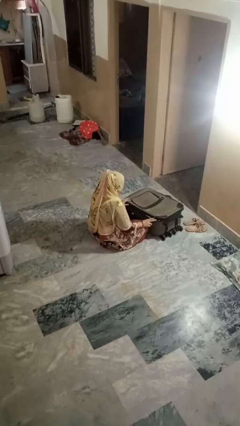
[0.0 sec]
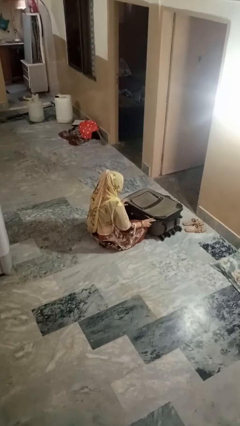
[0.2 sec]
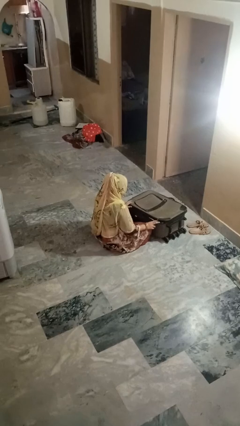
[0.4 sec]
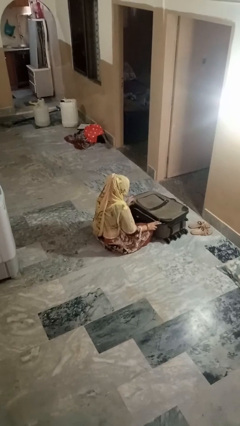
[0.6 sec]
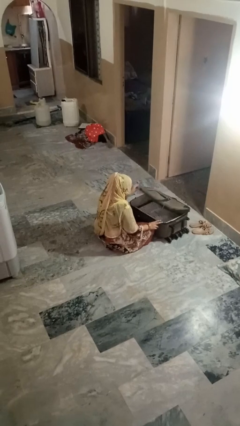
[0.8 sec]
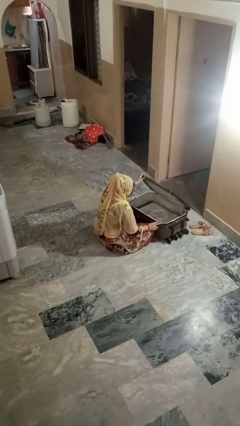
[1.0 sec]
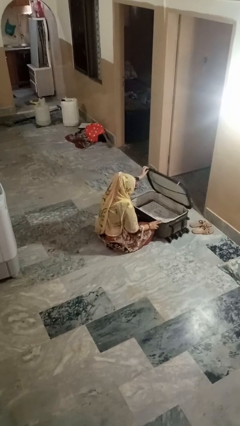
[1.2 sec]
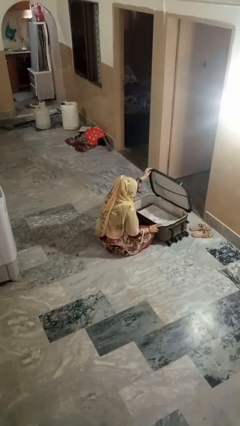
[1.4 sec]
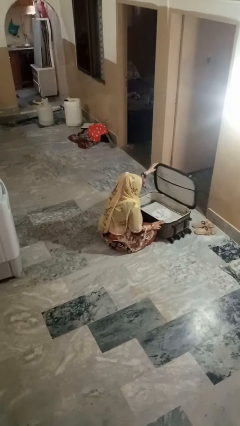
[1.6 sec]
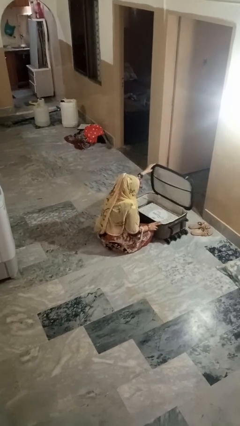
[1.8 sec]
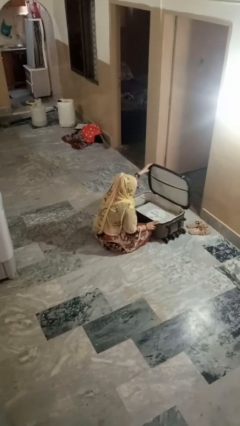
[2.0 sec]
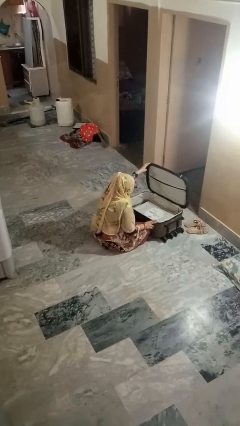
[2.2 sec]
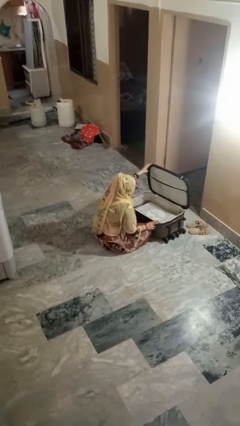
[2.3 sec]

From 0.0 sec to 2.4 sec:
person opens suitcase

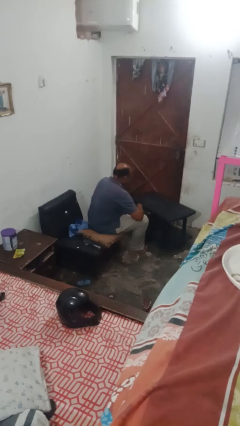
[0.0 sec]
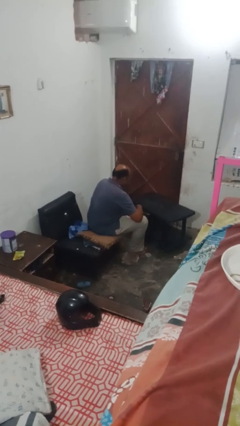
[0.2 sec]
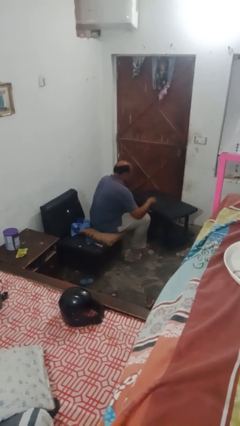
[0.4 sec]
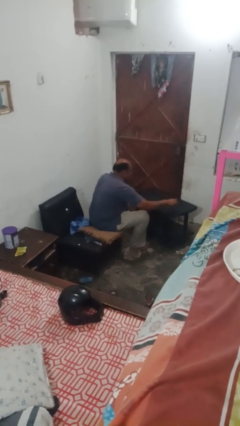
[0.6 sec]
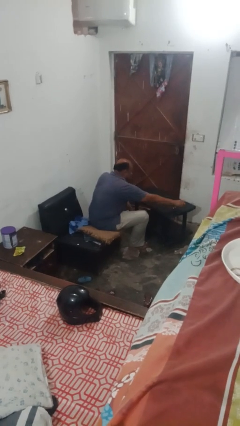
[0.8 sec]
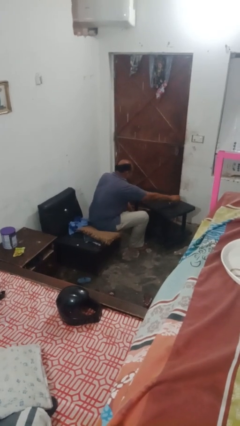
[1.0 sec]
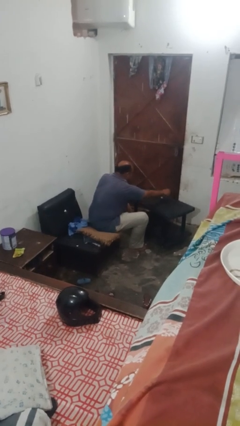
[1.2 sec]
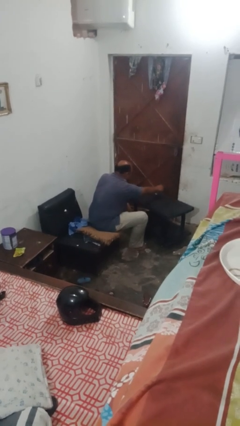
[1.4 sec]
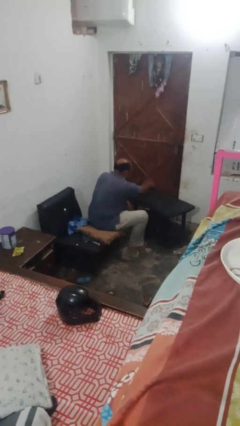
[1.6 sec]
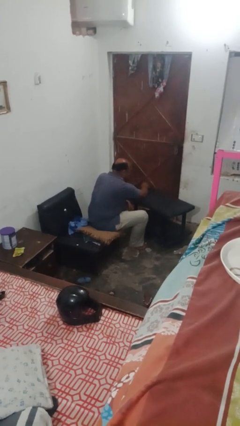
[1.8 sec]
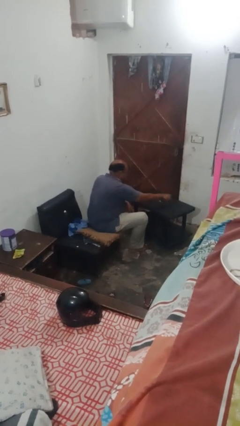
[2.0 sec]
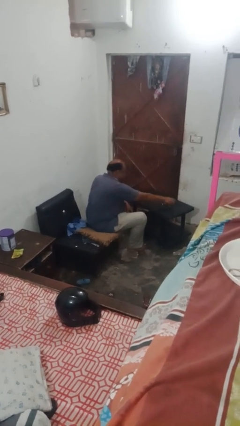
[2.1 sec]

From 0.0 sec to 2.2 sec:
person sprays from bottle

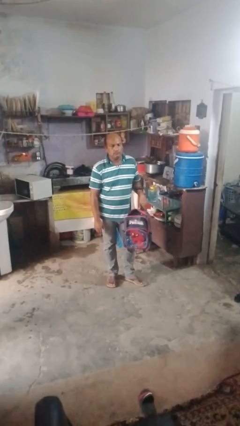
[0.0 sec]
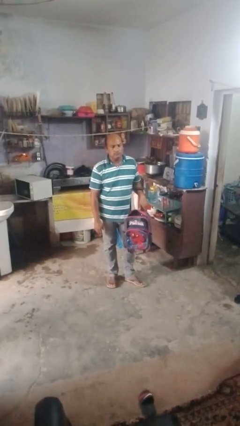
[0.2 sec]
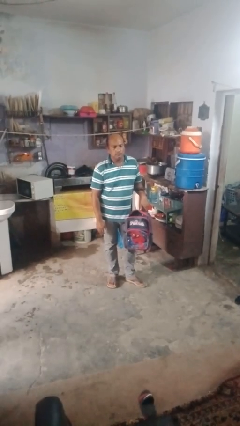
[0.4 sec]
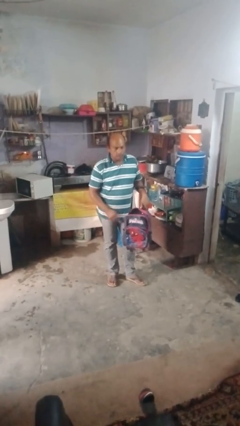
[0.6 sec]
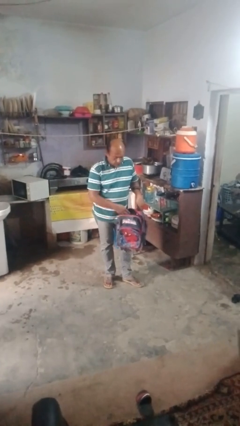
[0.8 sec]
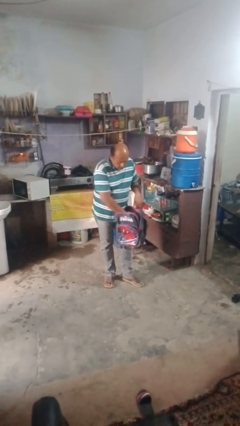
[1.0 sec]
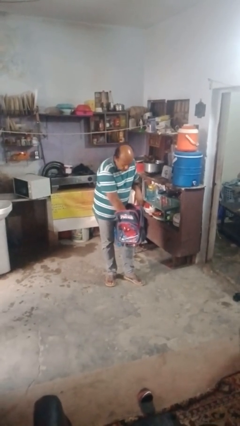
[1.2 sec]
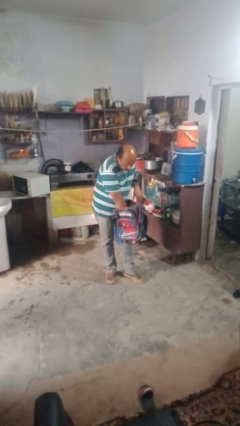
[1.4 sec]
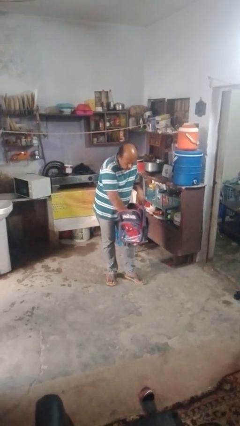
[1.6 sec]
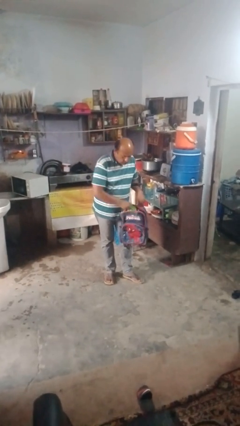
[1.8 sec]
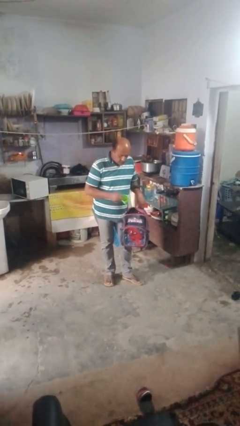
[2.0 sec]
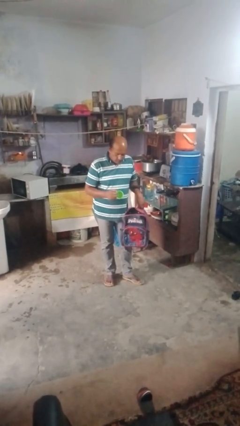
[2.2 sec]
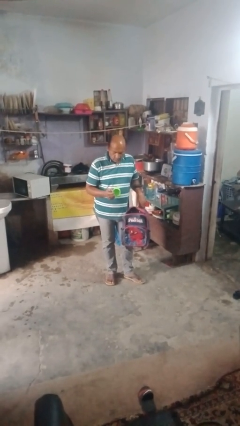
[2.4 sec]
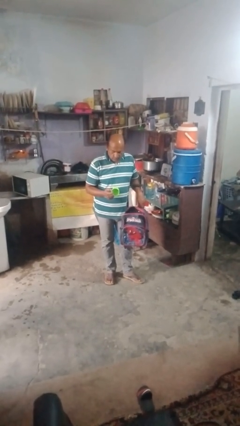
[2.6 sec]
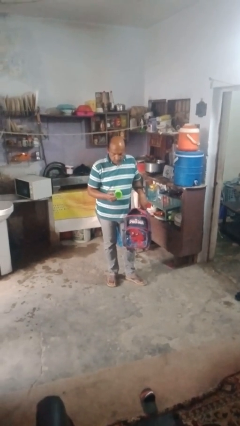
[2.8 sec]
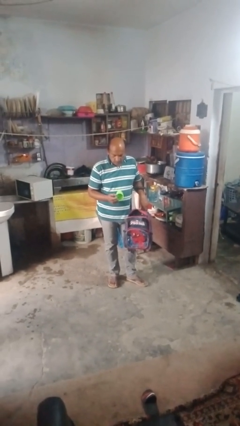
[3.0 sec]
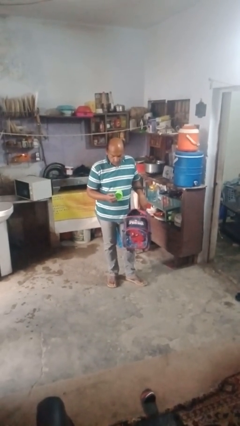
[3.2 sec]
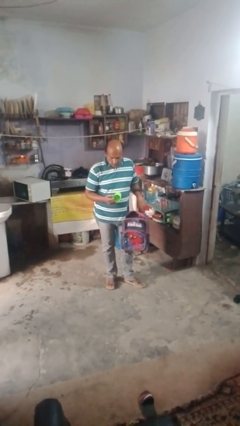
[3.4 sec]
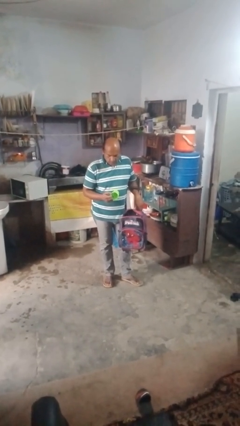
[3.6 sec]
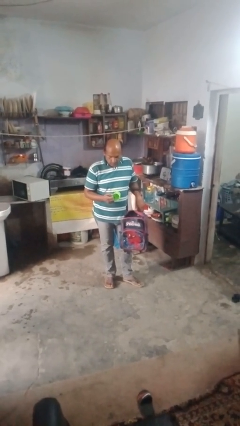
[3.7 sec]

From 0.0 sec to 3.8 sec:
person takes object from bag

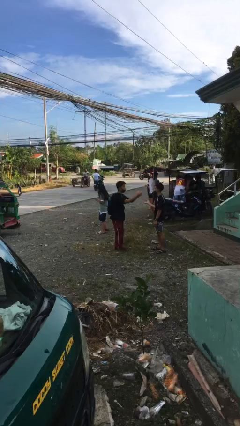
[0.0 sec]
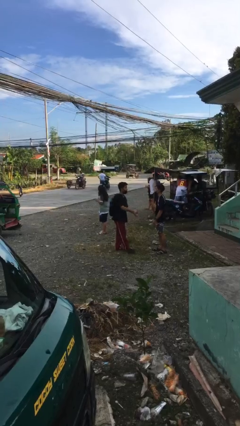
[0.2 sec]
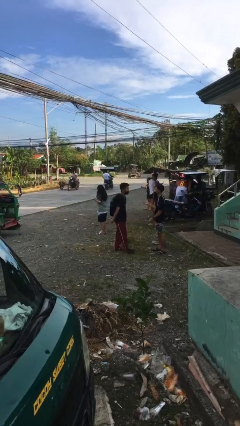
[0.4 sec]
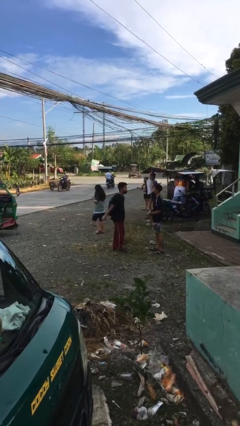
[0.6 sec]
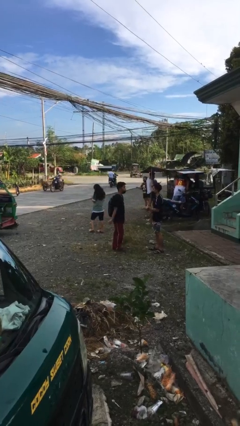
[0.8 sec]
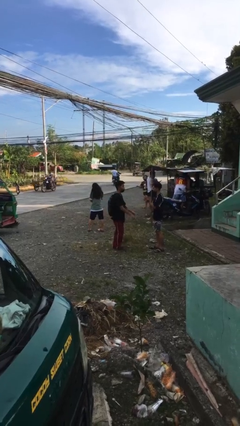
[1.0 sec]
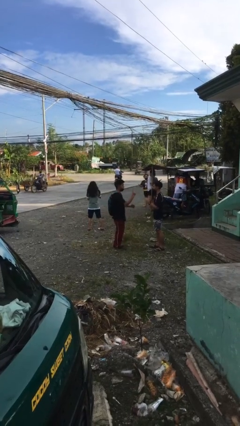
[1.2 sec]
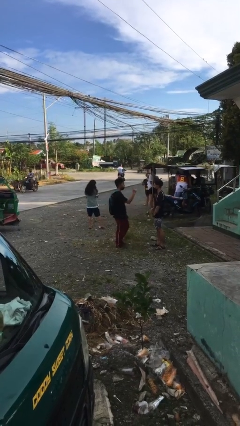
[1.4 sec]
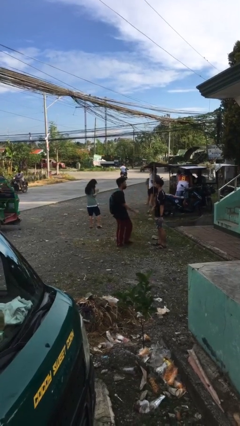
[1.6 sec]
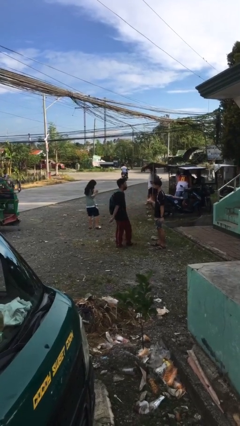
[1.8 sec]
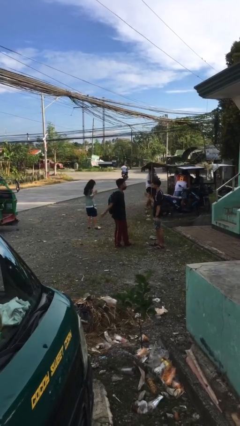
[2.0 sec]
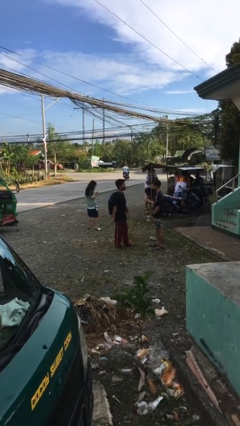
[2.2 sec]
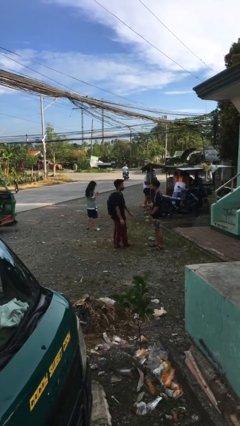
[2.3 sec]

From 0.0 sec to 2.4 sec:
person talks to person

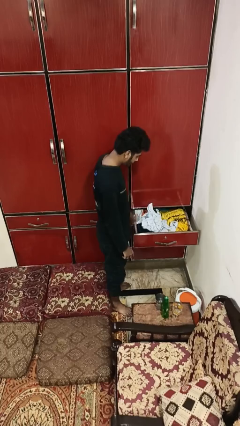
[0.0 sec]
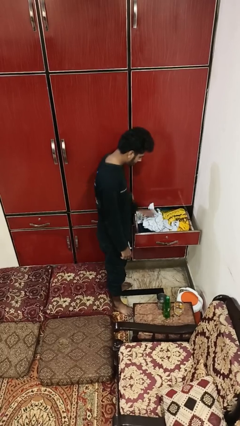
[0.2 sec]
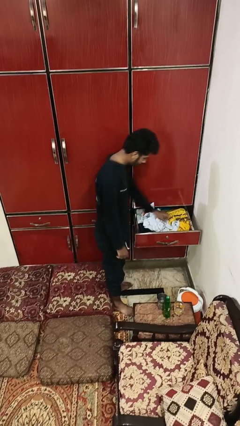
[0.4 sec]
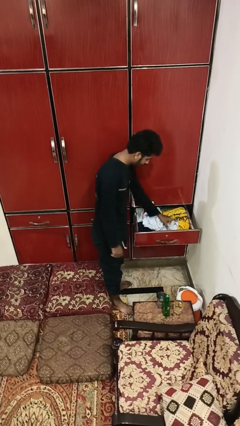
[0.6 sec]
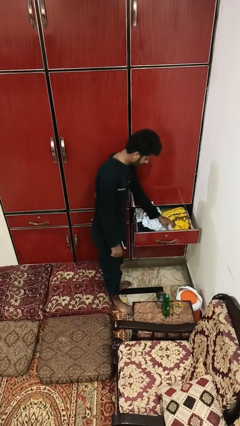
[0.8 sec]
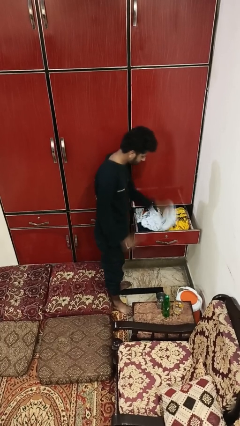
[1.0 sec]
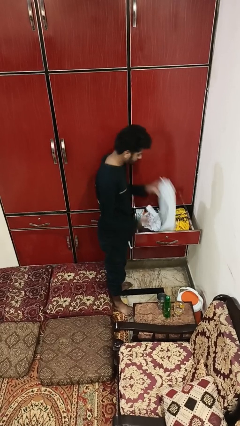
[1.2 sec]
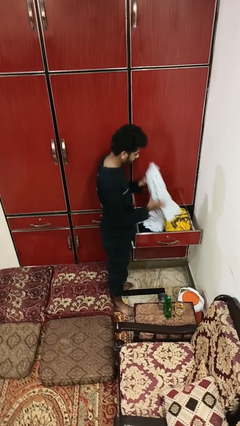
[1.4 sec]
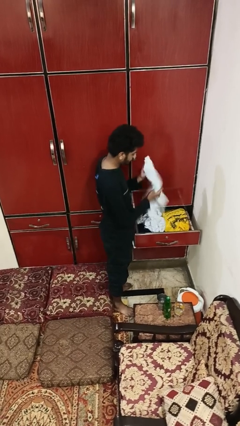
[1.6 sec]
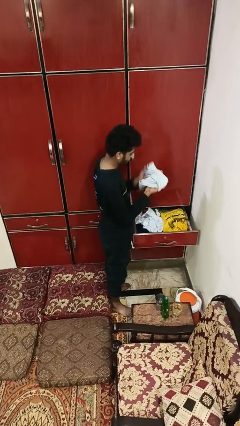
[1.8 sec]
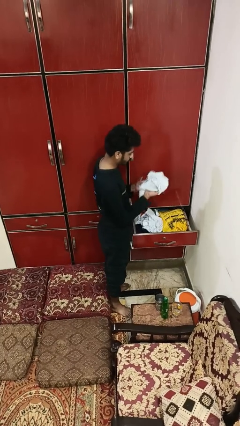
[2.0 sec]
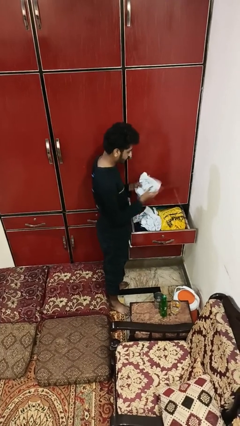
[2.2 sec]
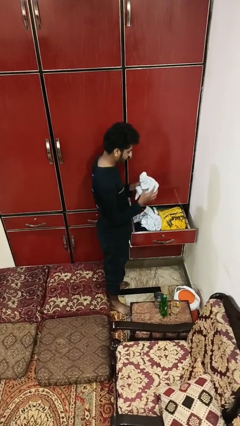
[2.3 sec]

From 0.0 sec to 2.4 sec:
person takes clothes from dresser

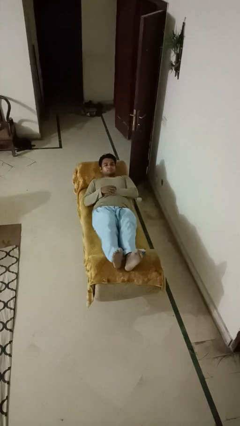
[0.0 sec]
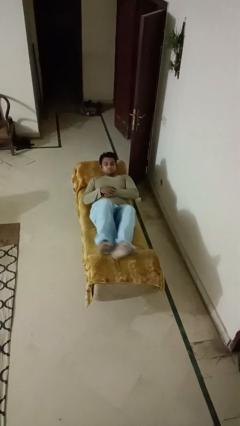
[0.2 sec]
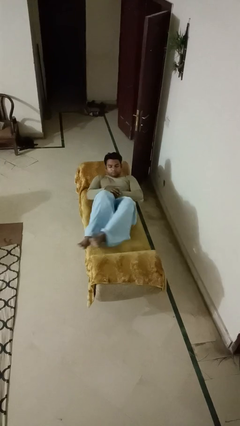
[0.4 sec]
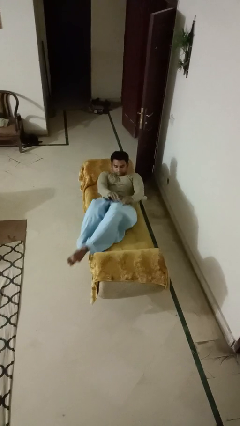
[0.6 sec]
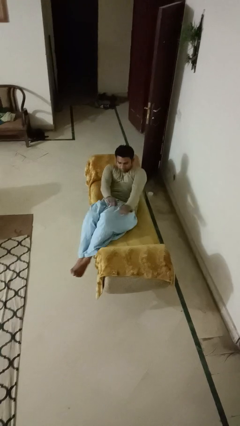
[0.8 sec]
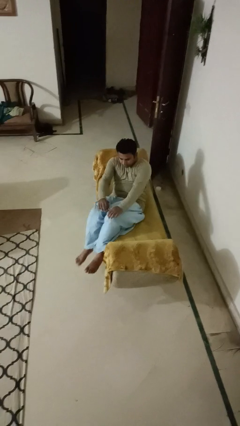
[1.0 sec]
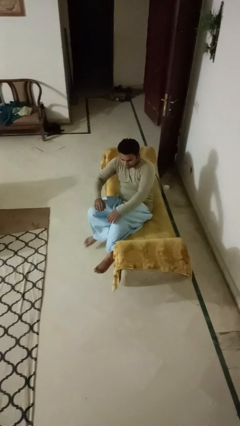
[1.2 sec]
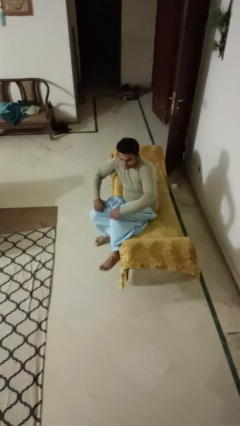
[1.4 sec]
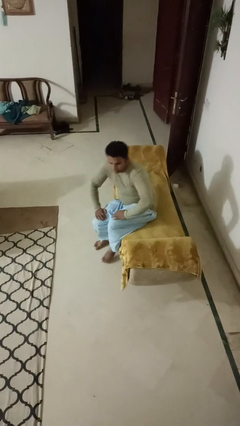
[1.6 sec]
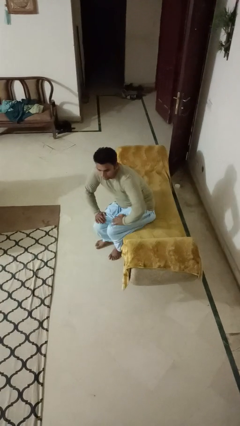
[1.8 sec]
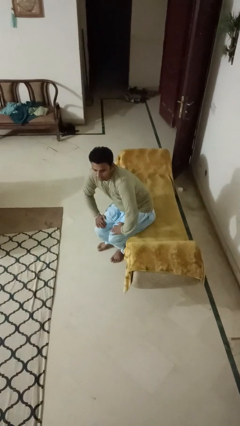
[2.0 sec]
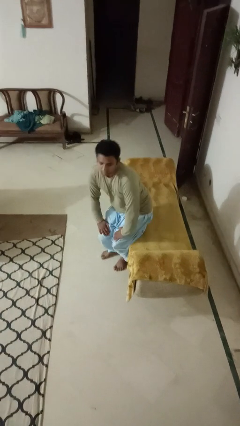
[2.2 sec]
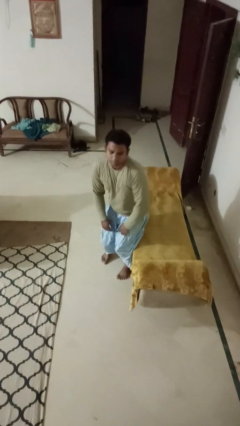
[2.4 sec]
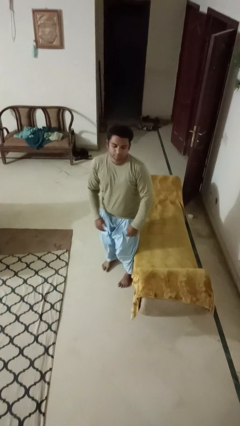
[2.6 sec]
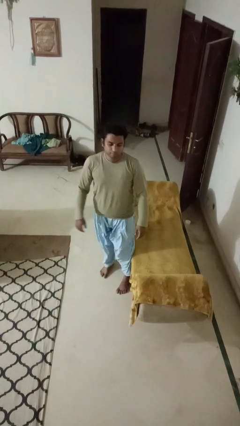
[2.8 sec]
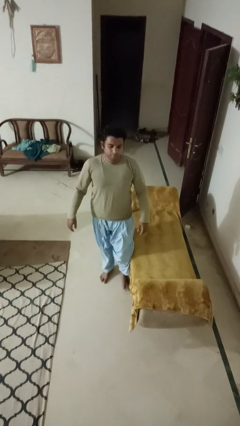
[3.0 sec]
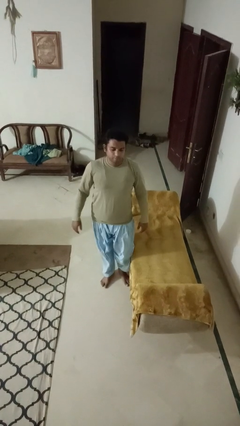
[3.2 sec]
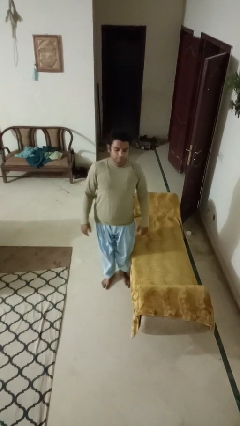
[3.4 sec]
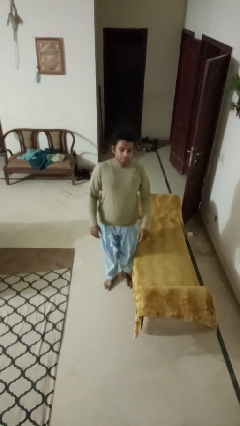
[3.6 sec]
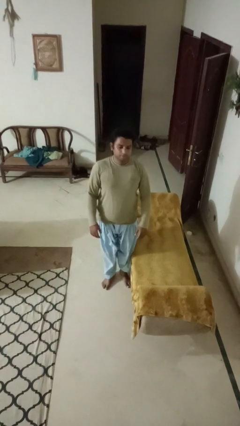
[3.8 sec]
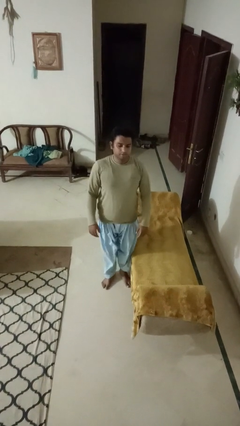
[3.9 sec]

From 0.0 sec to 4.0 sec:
person stands up
